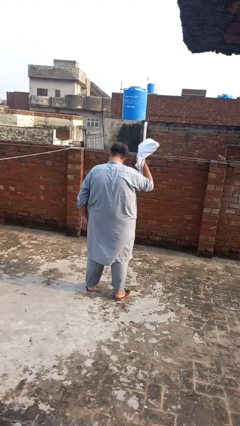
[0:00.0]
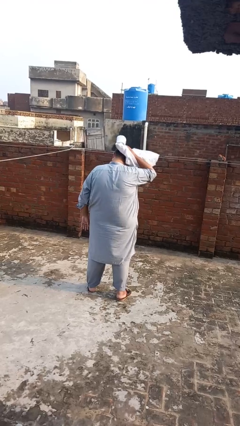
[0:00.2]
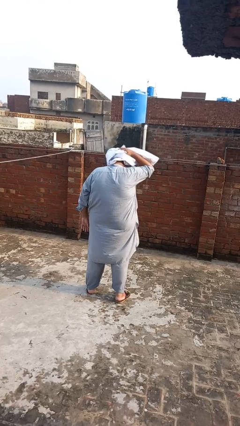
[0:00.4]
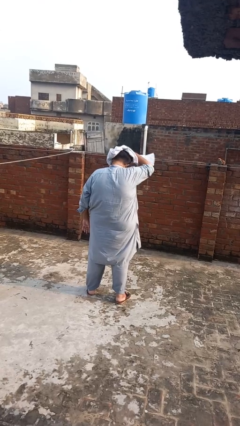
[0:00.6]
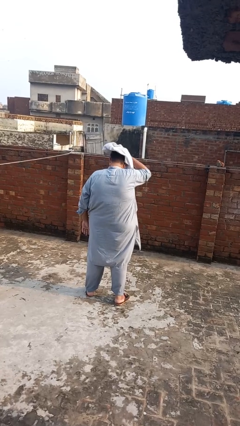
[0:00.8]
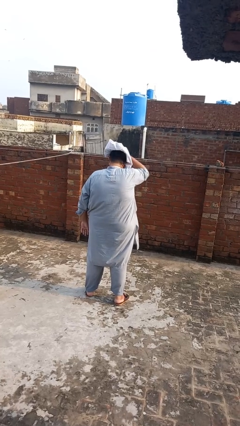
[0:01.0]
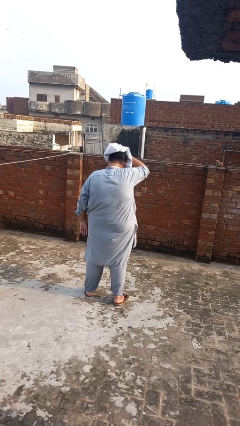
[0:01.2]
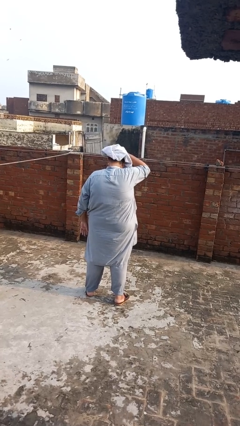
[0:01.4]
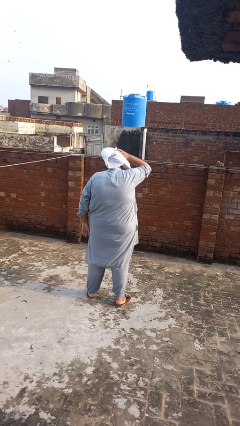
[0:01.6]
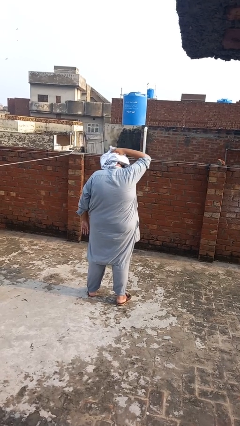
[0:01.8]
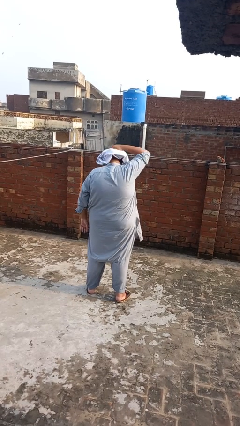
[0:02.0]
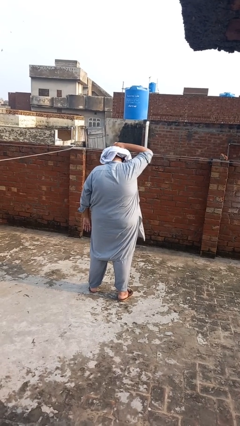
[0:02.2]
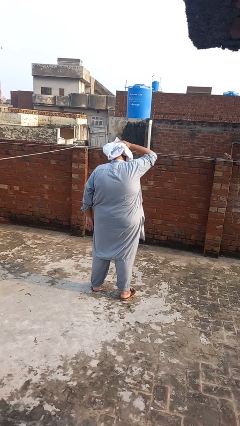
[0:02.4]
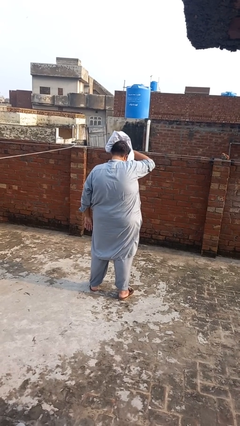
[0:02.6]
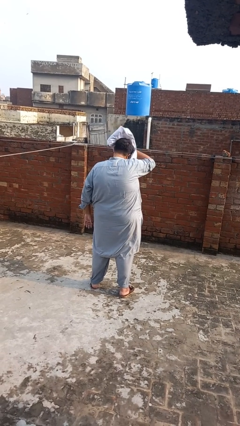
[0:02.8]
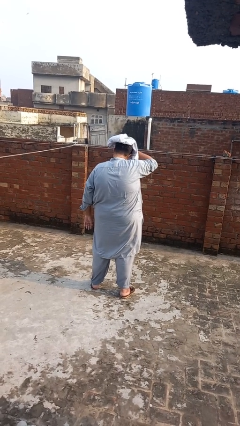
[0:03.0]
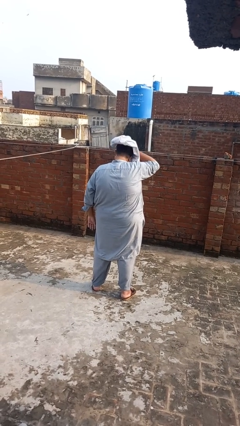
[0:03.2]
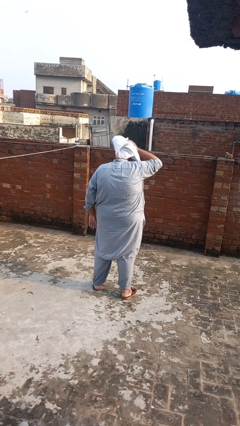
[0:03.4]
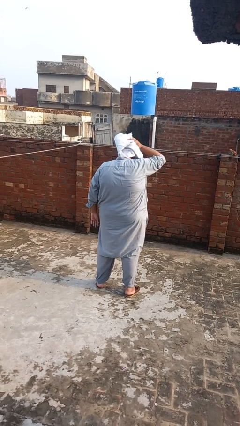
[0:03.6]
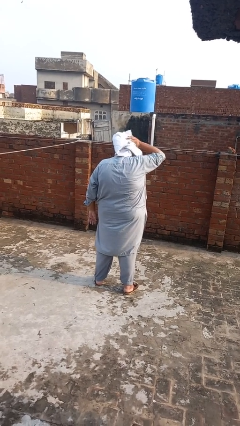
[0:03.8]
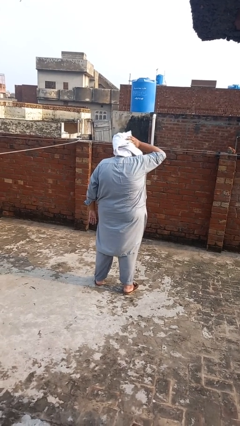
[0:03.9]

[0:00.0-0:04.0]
person dries hair with towel

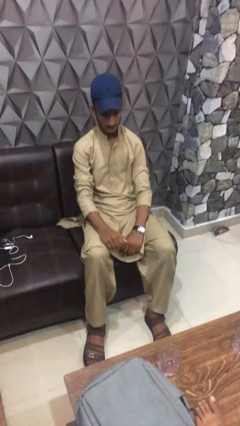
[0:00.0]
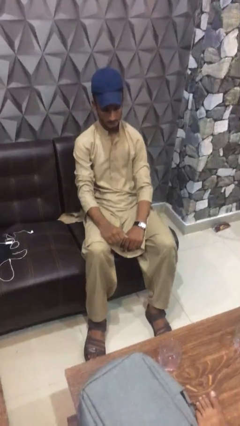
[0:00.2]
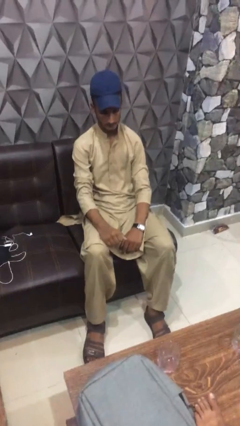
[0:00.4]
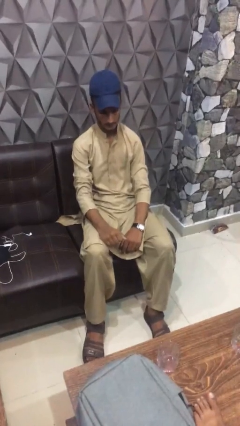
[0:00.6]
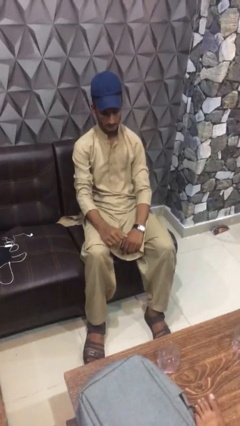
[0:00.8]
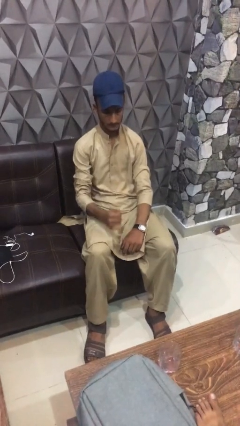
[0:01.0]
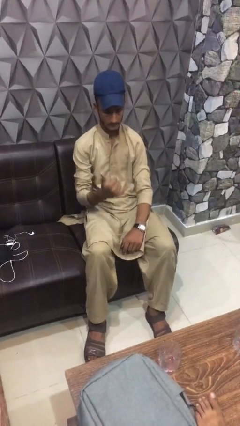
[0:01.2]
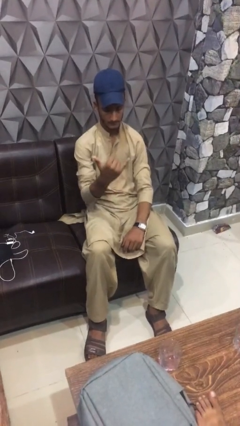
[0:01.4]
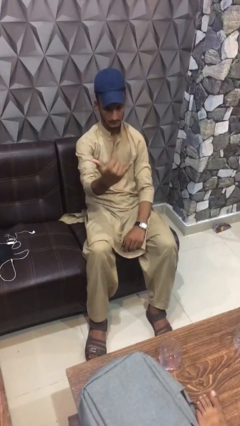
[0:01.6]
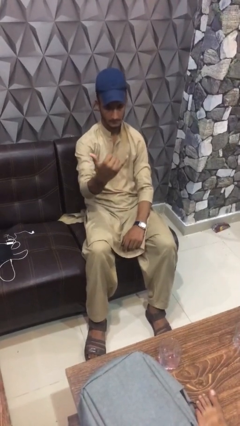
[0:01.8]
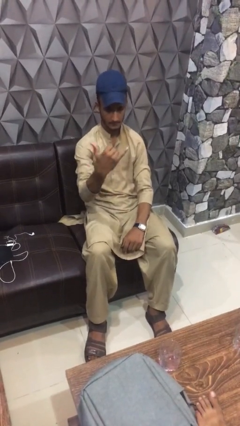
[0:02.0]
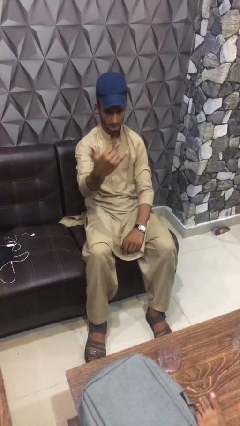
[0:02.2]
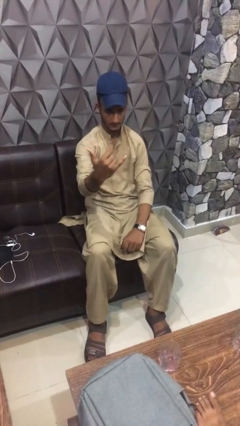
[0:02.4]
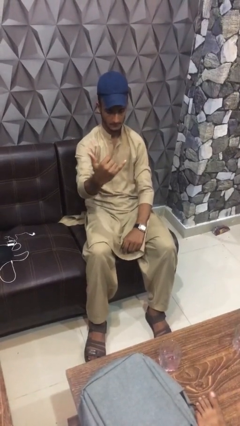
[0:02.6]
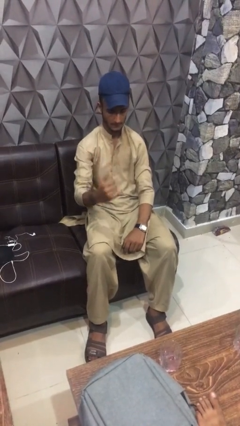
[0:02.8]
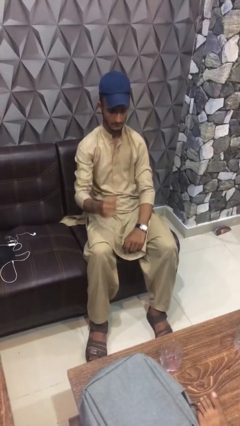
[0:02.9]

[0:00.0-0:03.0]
person gestures hang loose

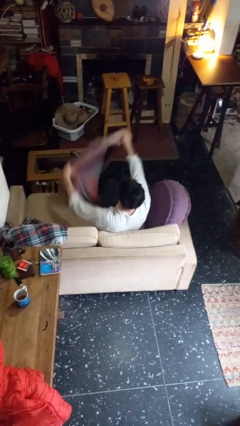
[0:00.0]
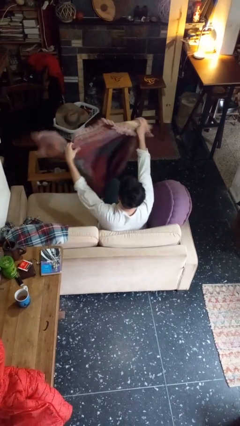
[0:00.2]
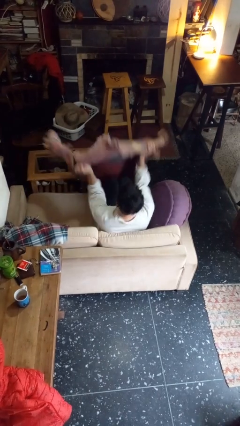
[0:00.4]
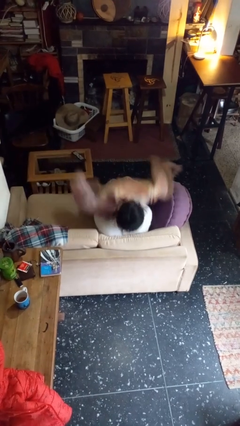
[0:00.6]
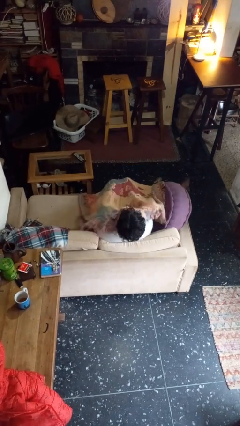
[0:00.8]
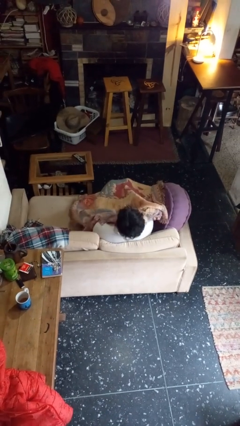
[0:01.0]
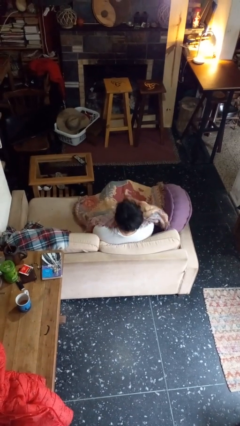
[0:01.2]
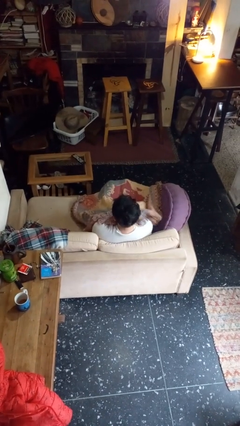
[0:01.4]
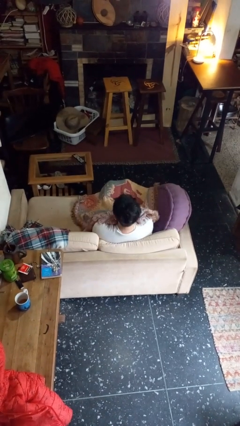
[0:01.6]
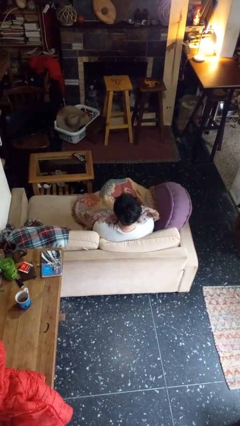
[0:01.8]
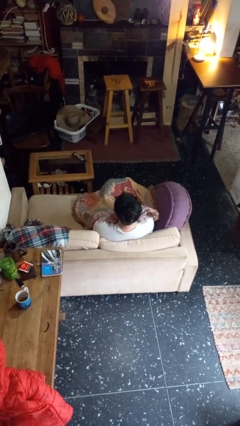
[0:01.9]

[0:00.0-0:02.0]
person covers with blanket

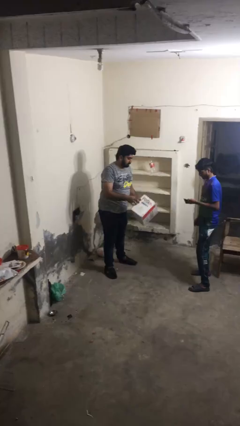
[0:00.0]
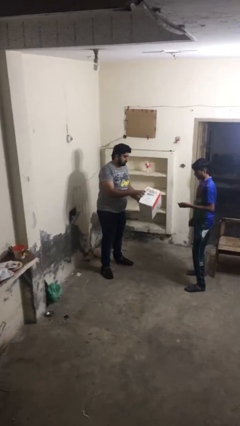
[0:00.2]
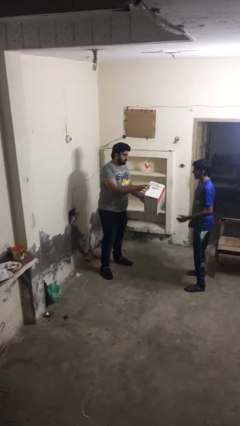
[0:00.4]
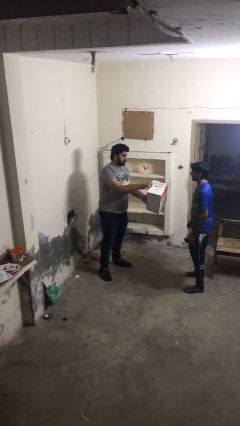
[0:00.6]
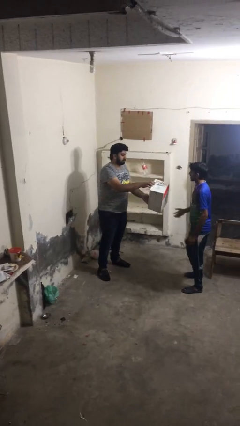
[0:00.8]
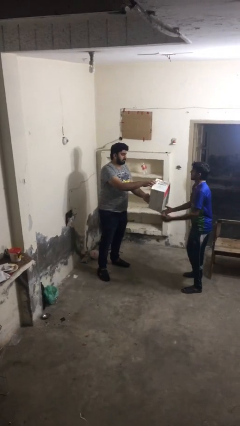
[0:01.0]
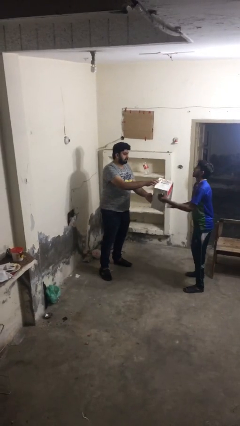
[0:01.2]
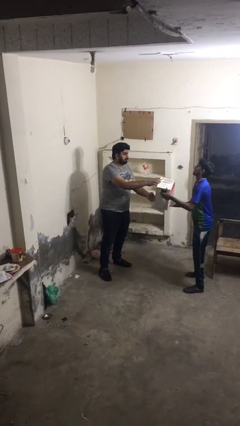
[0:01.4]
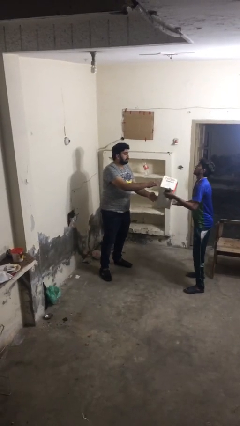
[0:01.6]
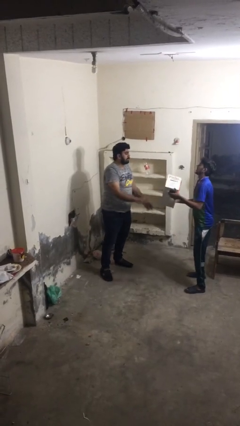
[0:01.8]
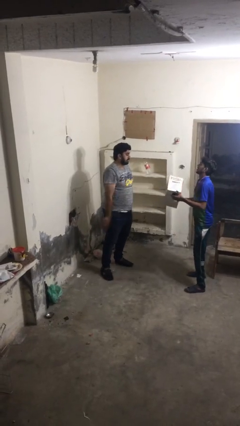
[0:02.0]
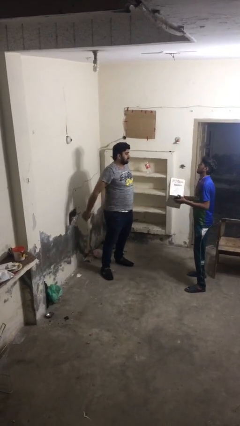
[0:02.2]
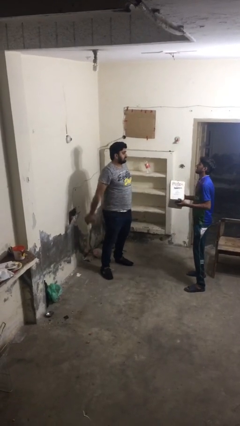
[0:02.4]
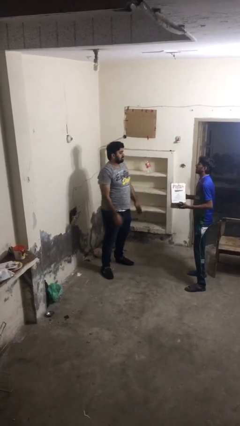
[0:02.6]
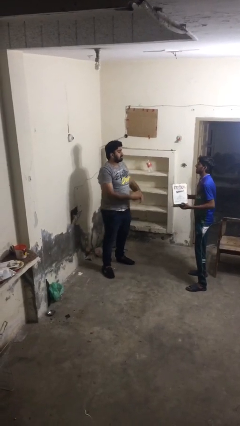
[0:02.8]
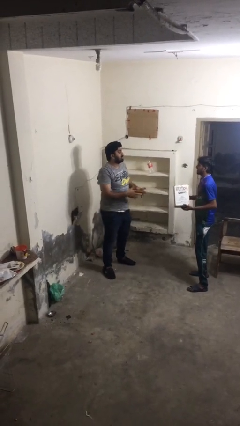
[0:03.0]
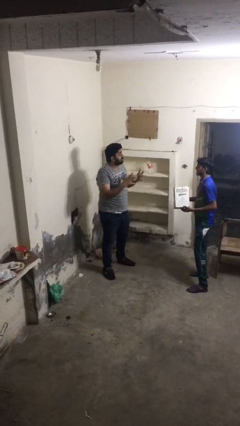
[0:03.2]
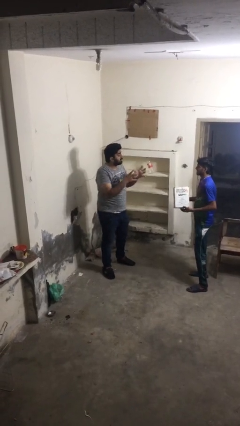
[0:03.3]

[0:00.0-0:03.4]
person transfers object to person

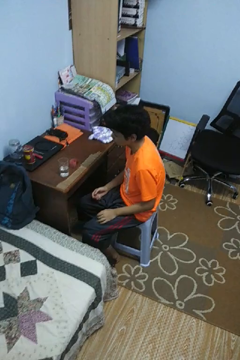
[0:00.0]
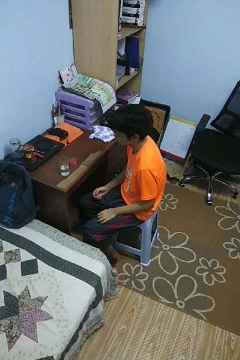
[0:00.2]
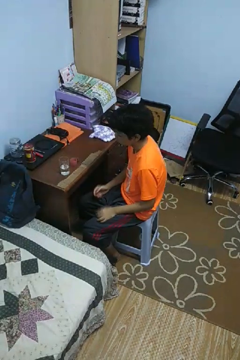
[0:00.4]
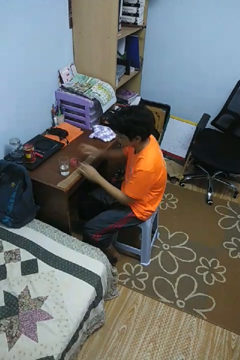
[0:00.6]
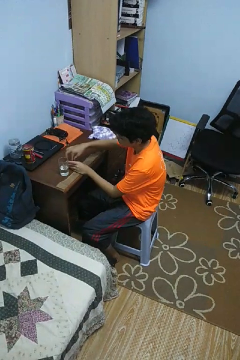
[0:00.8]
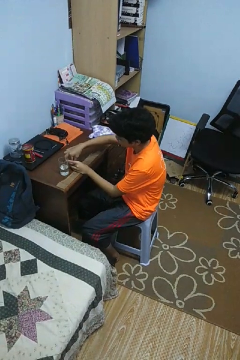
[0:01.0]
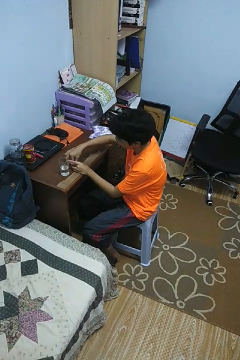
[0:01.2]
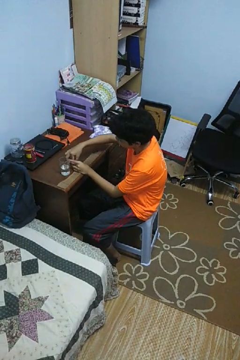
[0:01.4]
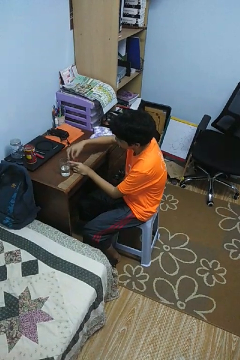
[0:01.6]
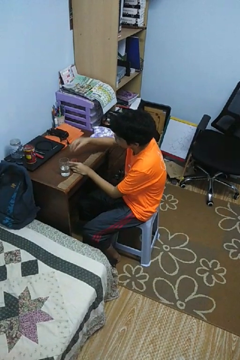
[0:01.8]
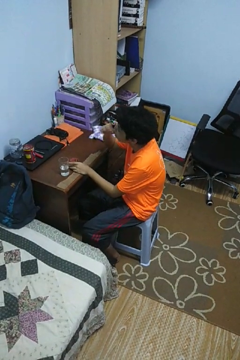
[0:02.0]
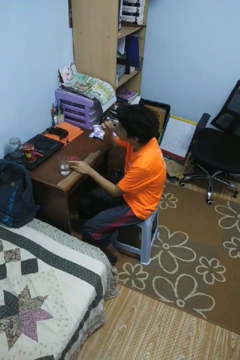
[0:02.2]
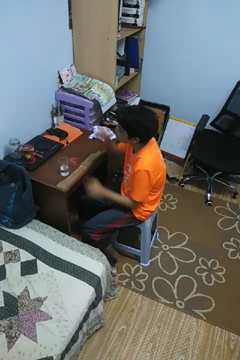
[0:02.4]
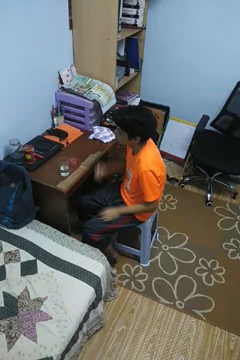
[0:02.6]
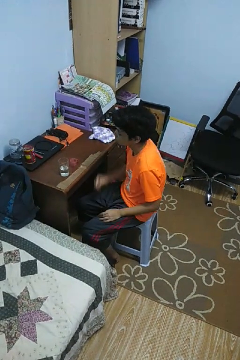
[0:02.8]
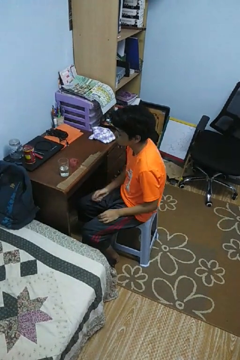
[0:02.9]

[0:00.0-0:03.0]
person takes medicine pills

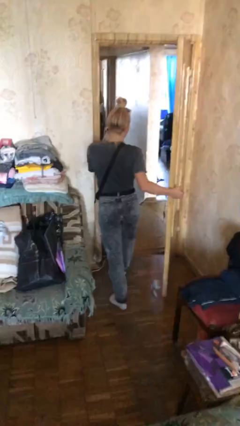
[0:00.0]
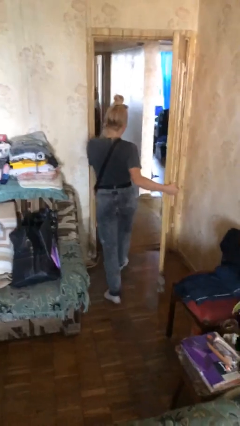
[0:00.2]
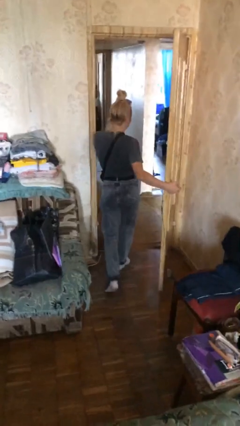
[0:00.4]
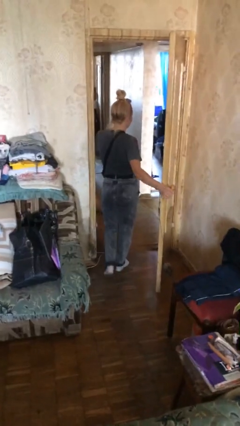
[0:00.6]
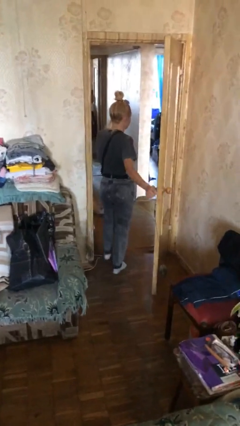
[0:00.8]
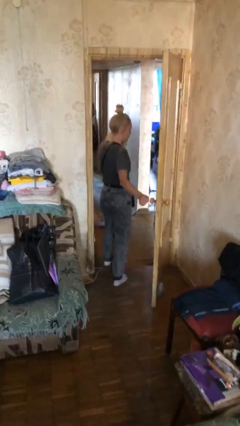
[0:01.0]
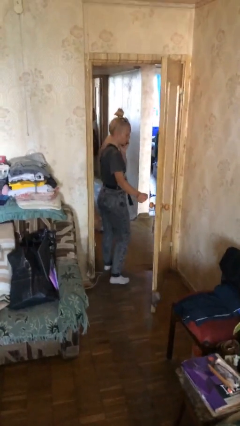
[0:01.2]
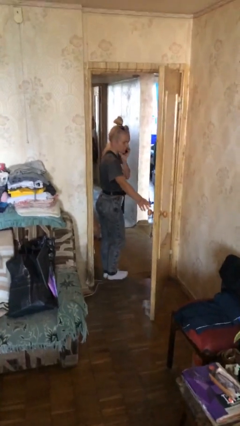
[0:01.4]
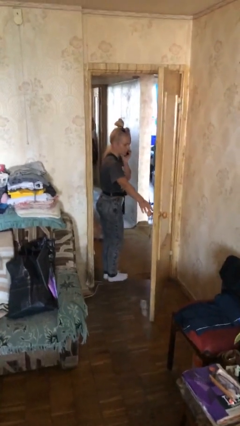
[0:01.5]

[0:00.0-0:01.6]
person exits scene through structure

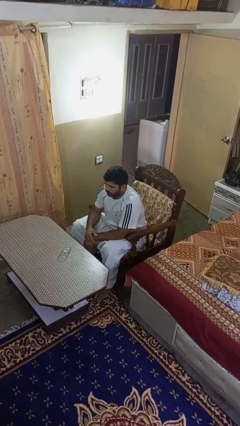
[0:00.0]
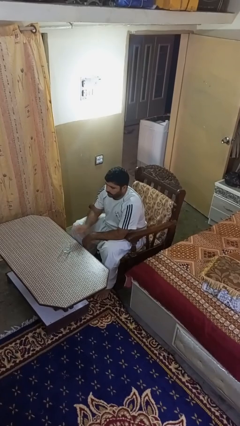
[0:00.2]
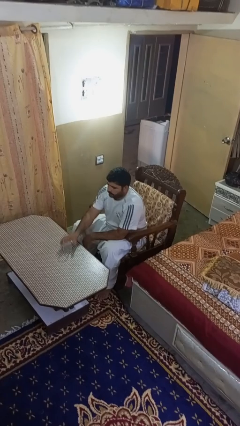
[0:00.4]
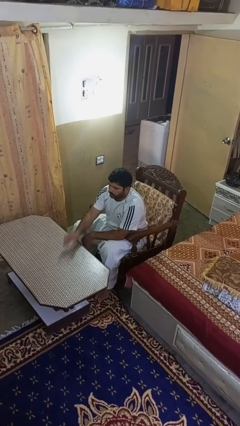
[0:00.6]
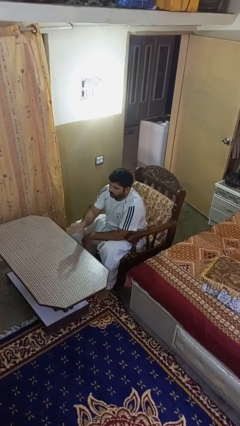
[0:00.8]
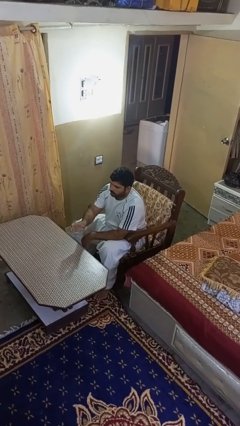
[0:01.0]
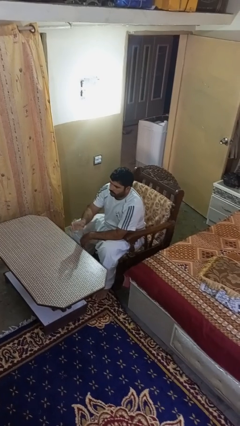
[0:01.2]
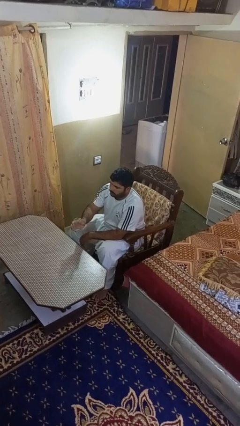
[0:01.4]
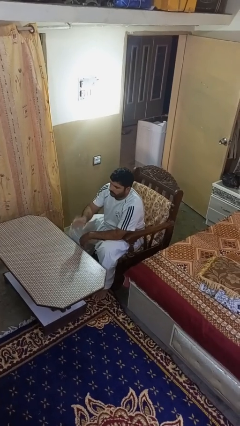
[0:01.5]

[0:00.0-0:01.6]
person picks up object from table
